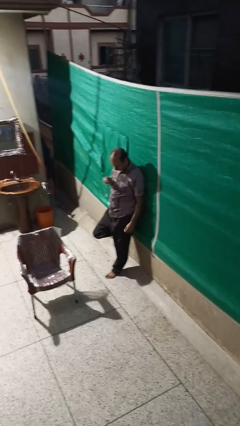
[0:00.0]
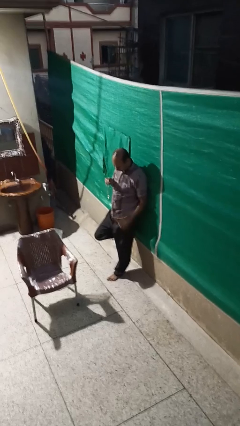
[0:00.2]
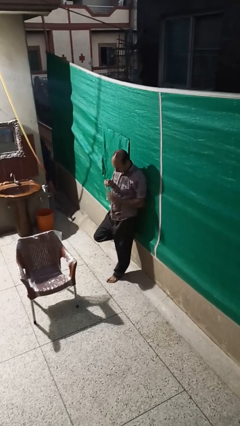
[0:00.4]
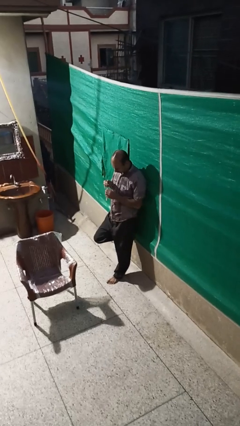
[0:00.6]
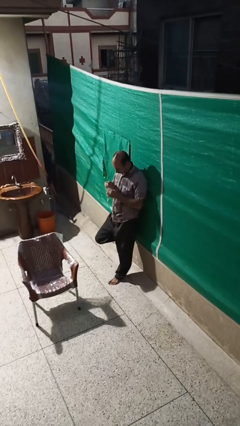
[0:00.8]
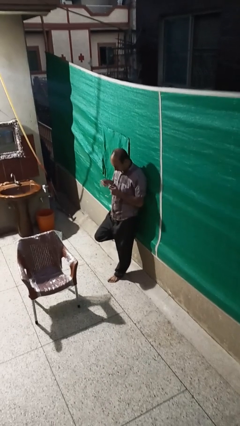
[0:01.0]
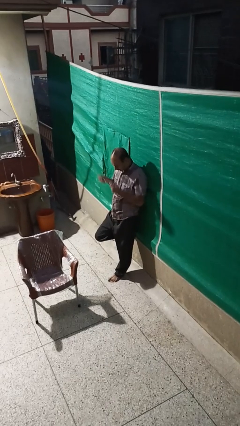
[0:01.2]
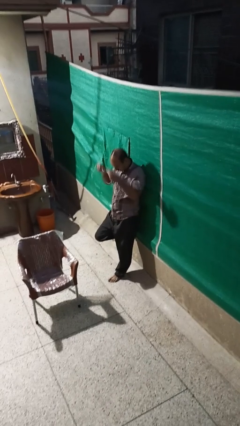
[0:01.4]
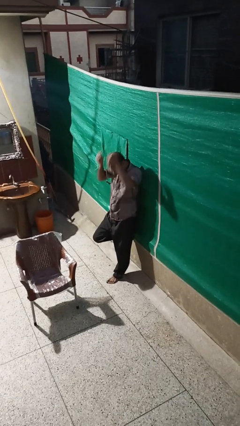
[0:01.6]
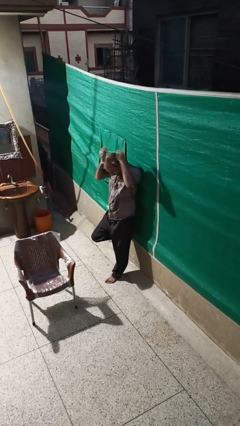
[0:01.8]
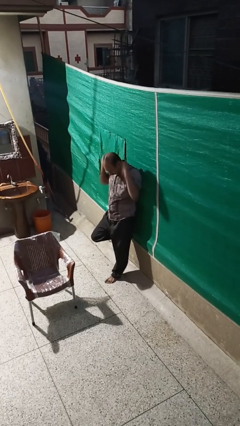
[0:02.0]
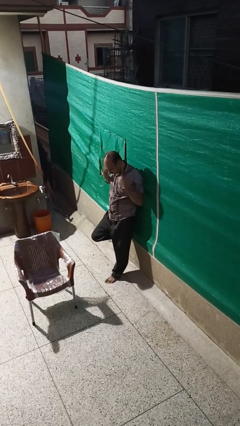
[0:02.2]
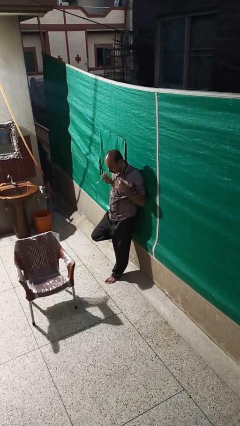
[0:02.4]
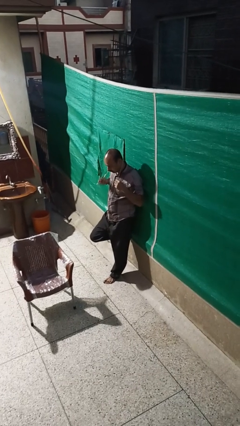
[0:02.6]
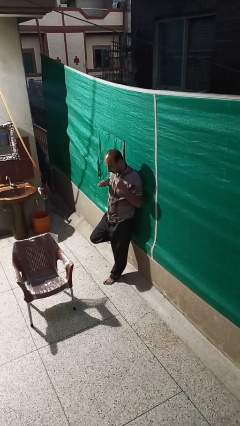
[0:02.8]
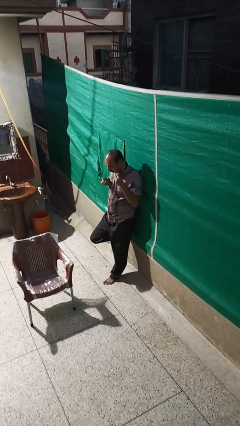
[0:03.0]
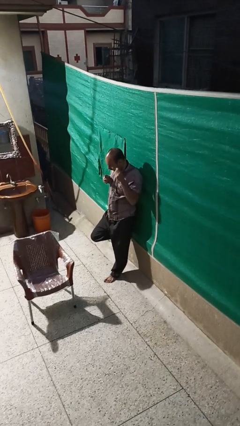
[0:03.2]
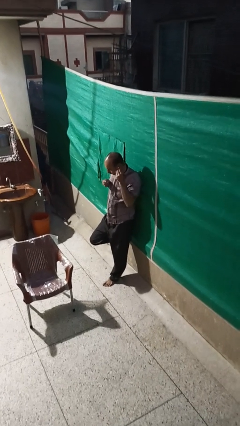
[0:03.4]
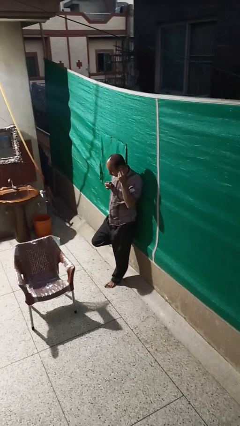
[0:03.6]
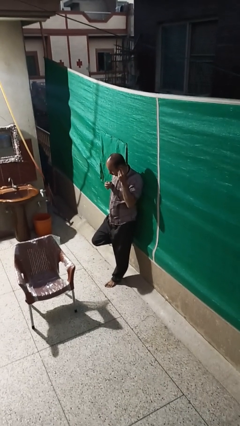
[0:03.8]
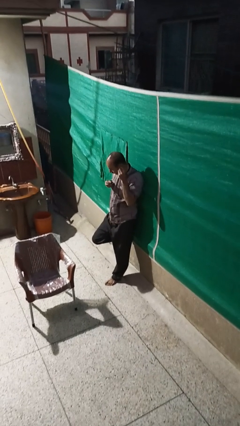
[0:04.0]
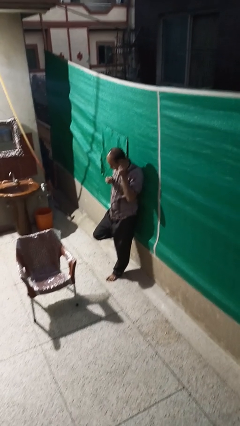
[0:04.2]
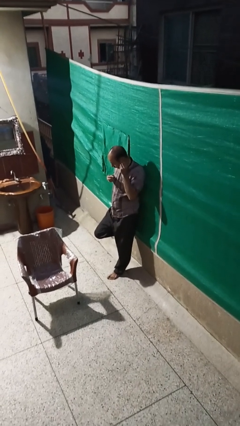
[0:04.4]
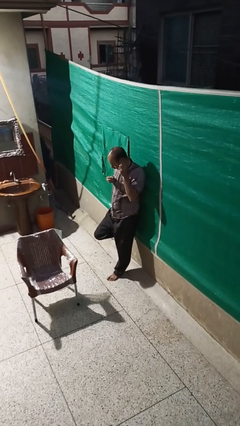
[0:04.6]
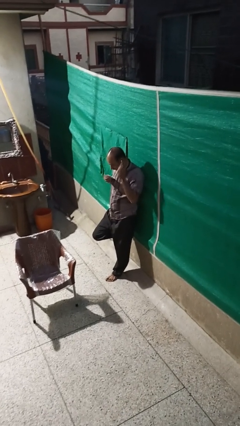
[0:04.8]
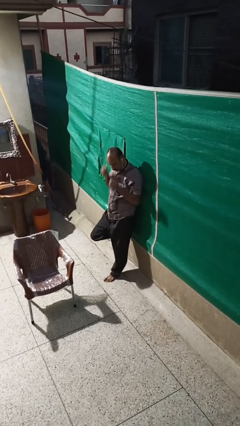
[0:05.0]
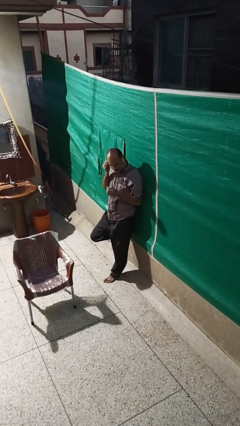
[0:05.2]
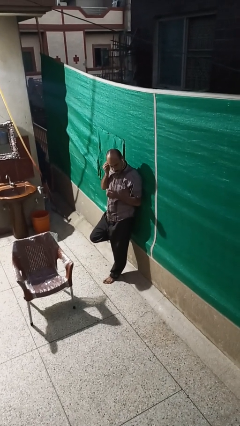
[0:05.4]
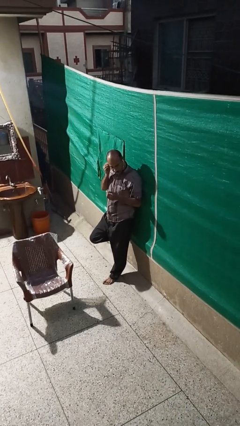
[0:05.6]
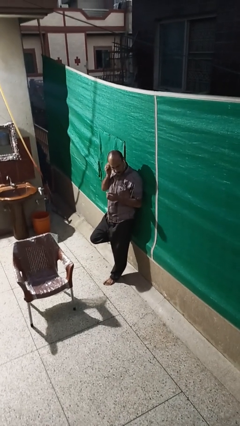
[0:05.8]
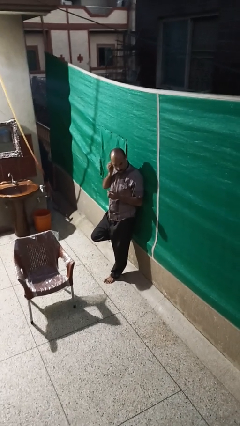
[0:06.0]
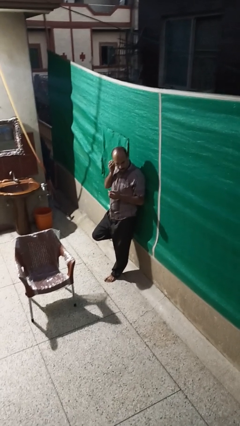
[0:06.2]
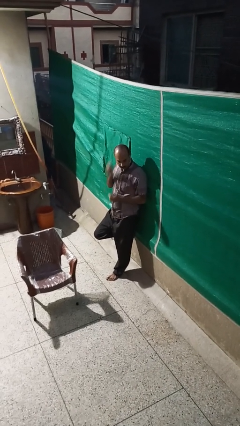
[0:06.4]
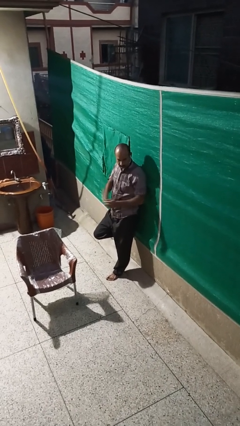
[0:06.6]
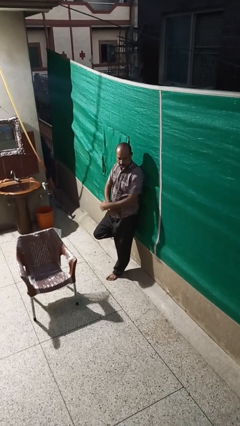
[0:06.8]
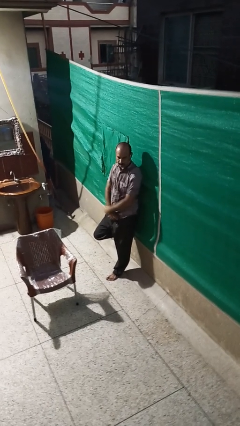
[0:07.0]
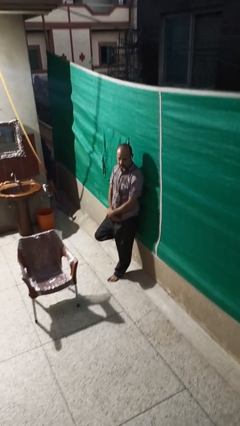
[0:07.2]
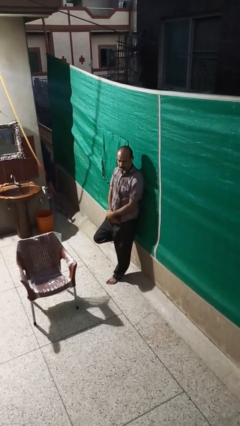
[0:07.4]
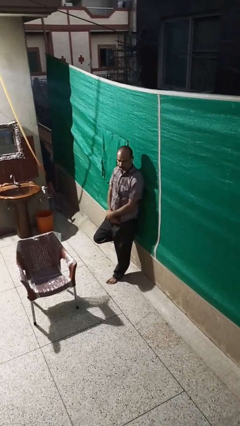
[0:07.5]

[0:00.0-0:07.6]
person puts on headphones

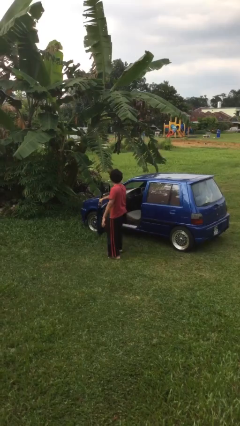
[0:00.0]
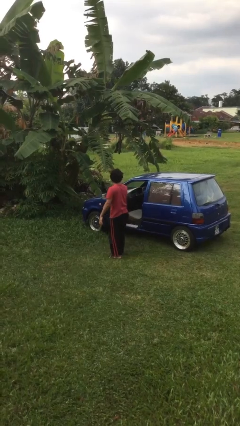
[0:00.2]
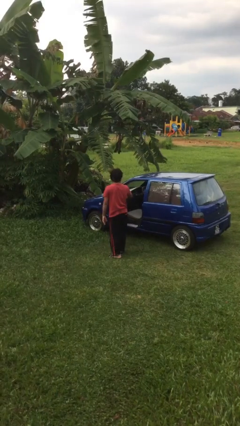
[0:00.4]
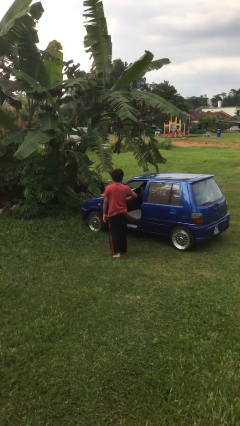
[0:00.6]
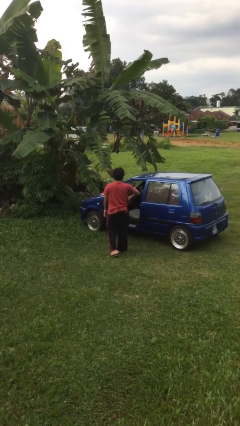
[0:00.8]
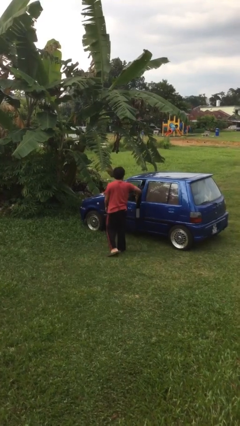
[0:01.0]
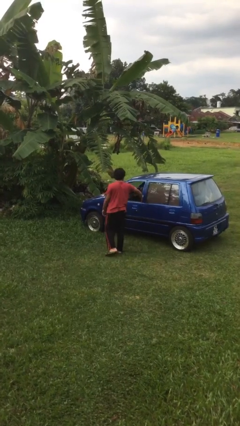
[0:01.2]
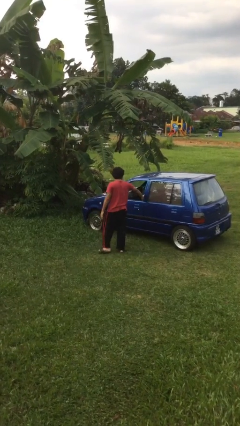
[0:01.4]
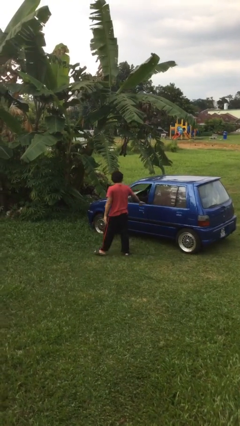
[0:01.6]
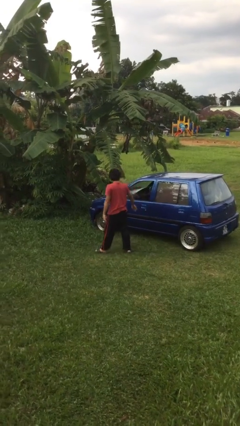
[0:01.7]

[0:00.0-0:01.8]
person closes car door

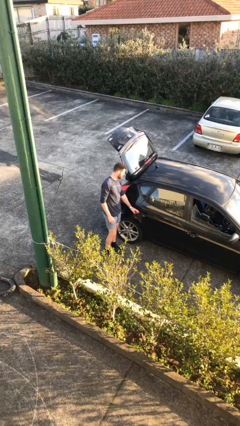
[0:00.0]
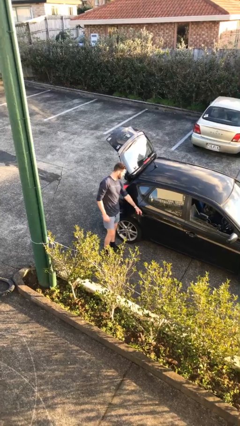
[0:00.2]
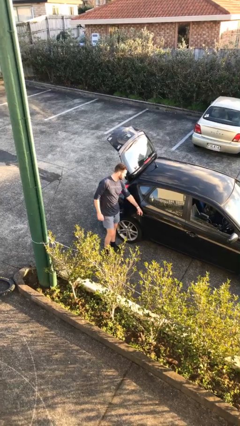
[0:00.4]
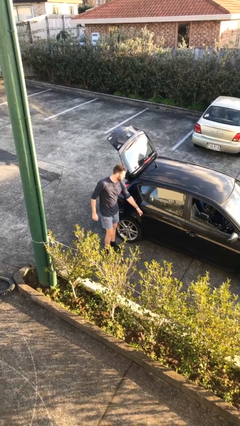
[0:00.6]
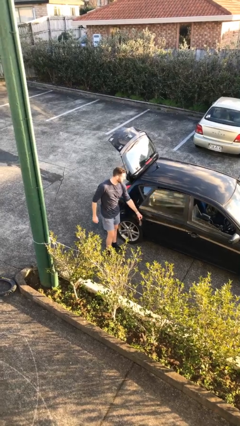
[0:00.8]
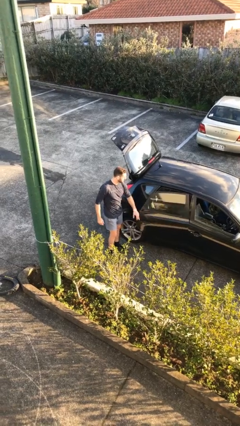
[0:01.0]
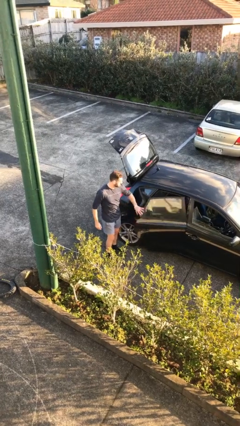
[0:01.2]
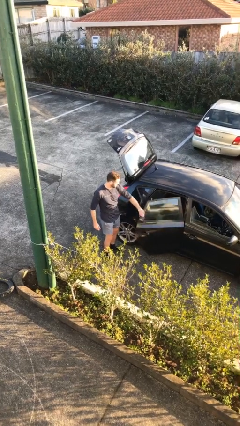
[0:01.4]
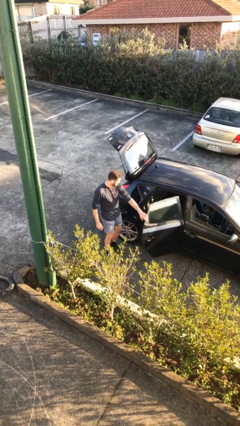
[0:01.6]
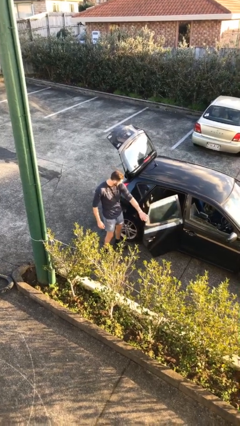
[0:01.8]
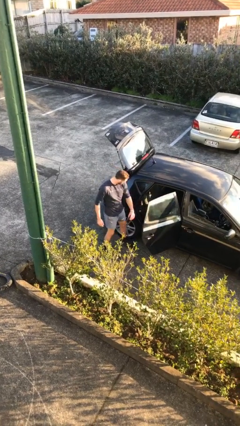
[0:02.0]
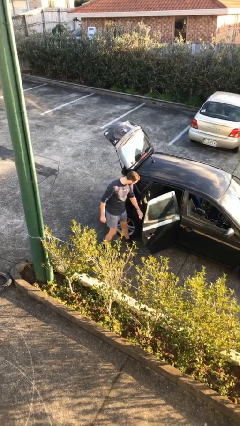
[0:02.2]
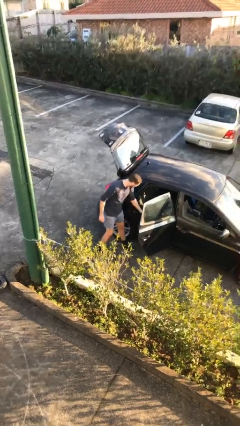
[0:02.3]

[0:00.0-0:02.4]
person opens car door

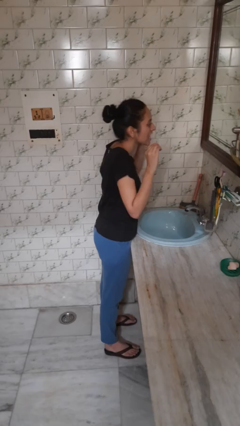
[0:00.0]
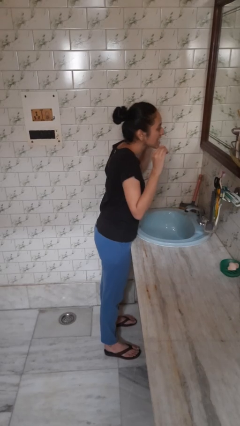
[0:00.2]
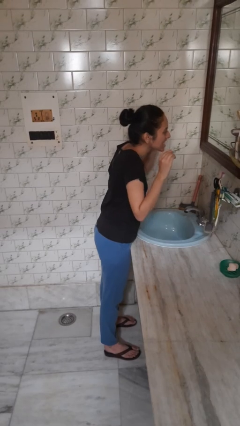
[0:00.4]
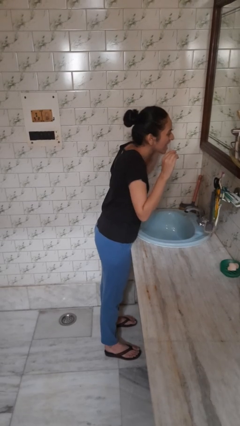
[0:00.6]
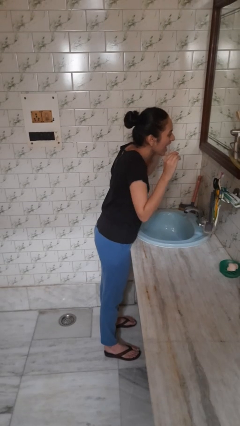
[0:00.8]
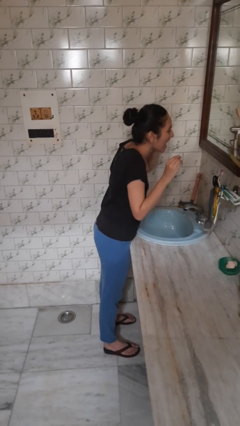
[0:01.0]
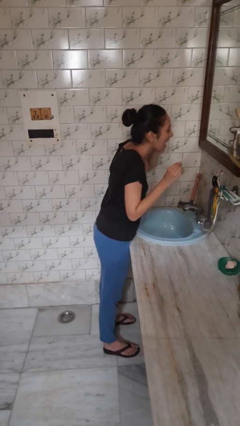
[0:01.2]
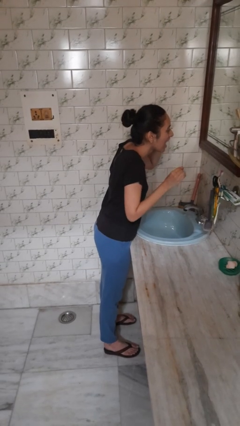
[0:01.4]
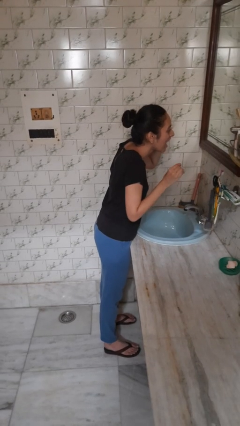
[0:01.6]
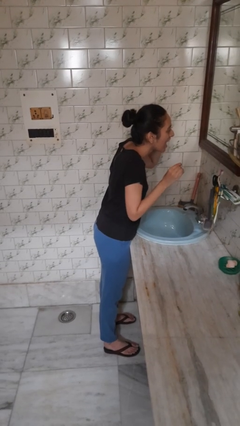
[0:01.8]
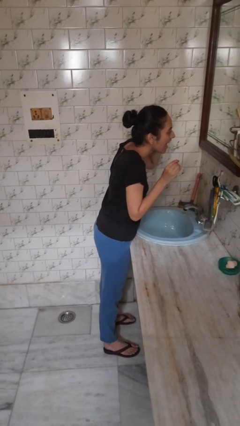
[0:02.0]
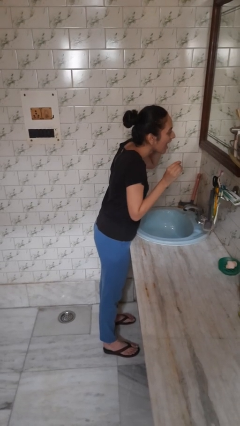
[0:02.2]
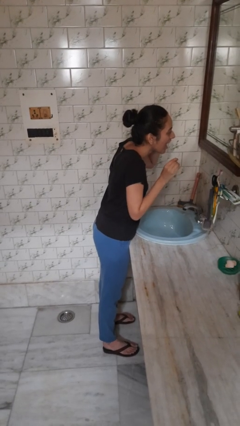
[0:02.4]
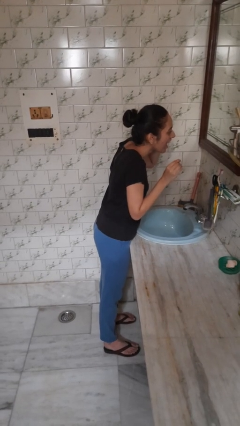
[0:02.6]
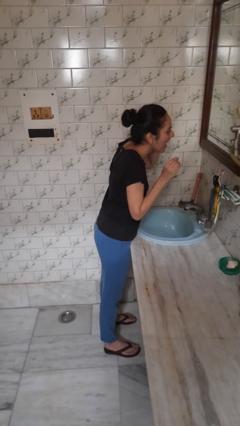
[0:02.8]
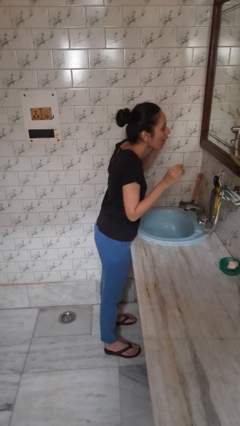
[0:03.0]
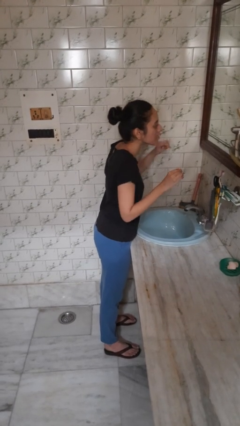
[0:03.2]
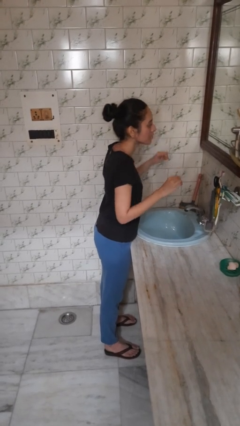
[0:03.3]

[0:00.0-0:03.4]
person flosses

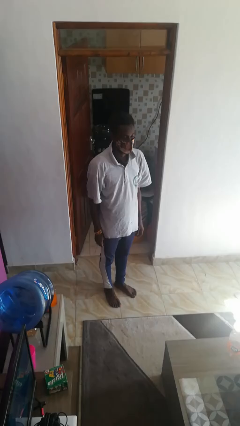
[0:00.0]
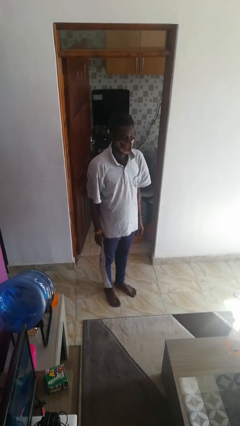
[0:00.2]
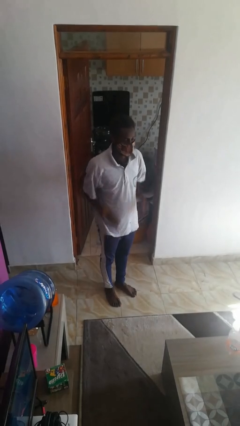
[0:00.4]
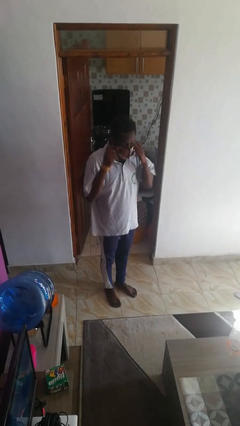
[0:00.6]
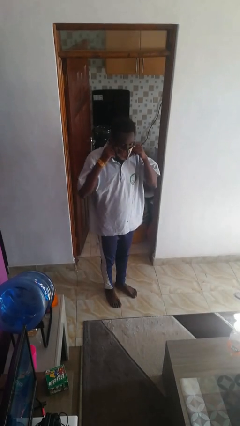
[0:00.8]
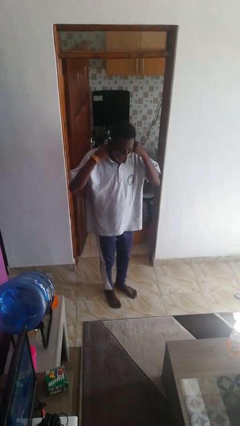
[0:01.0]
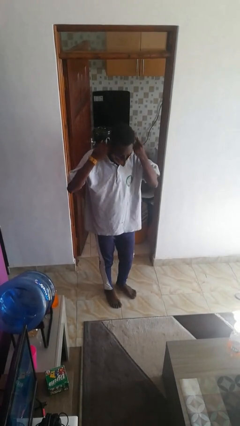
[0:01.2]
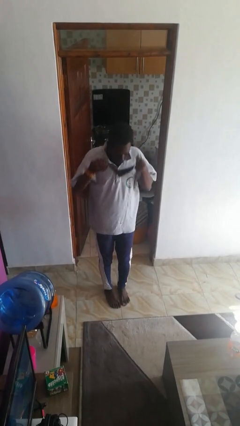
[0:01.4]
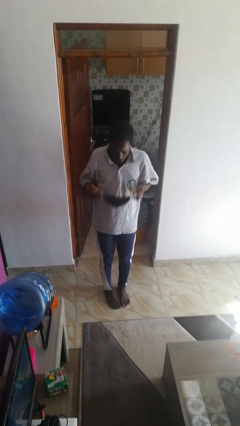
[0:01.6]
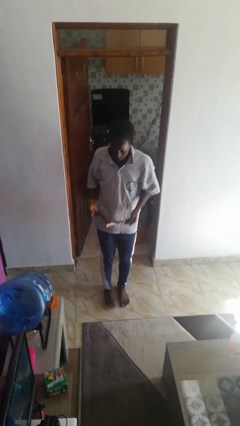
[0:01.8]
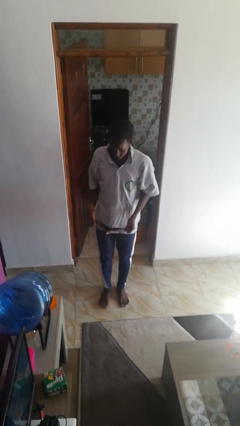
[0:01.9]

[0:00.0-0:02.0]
person takes off facemask

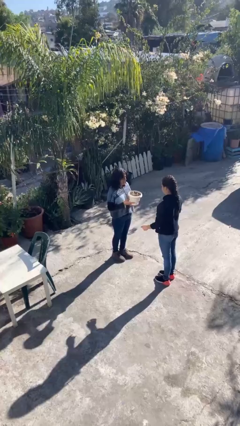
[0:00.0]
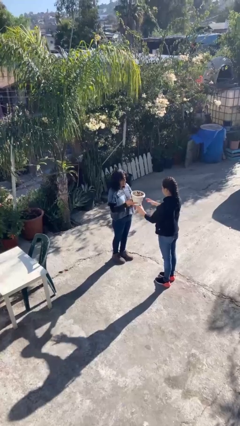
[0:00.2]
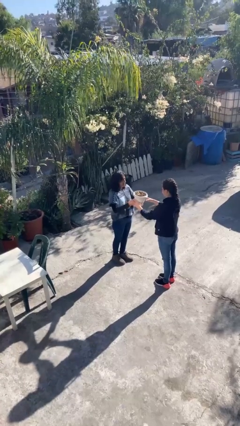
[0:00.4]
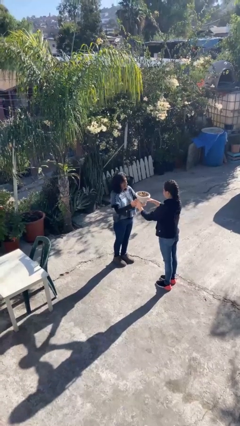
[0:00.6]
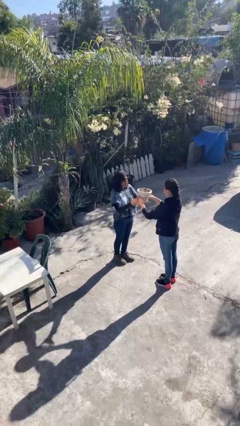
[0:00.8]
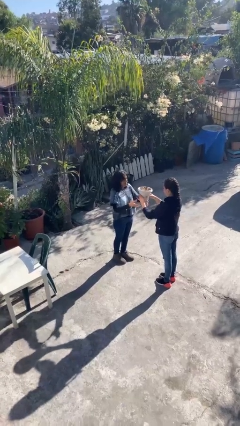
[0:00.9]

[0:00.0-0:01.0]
person transfers object to person
